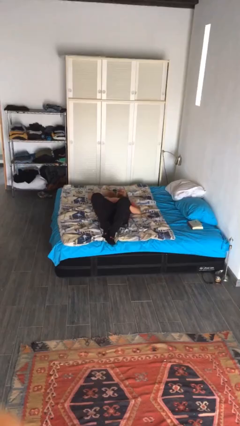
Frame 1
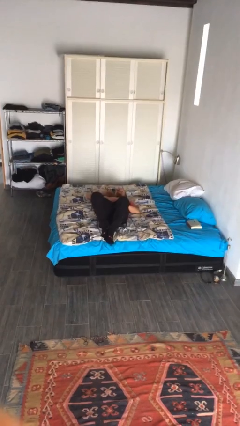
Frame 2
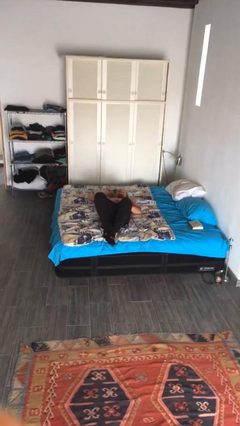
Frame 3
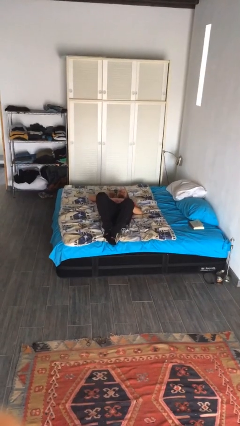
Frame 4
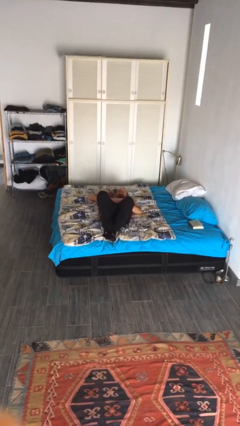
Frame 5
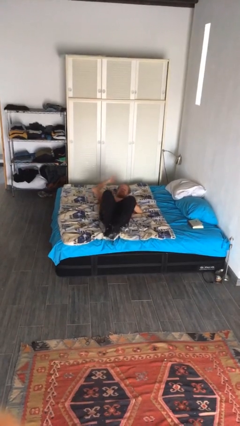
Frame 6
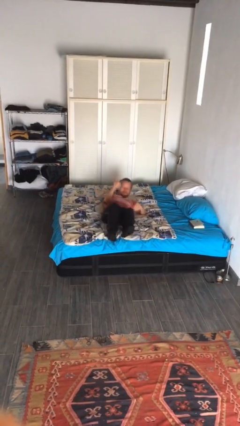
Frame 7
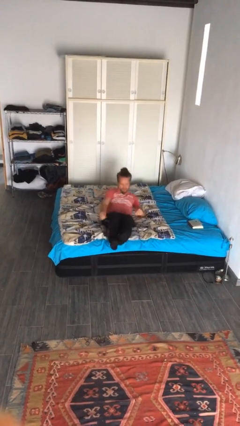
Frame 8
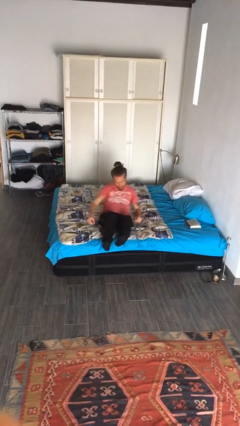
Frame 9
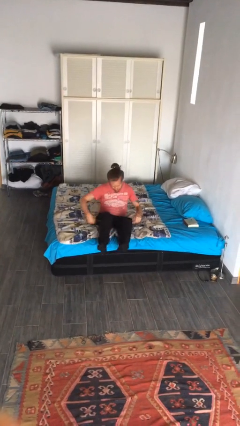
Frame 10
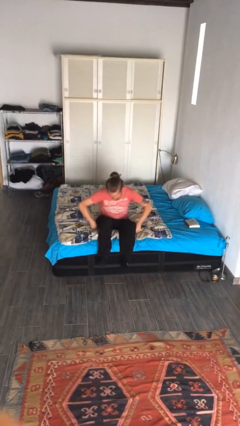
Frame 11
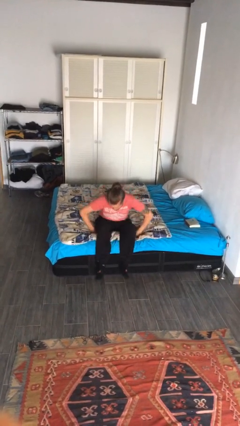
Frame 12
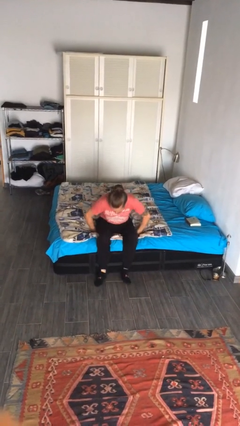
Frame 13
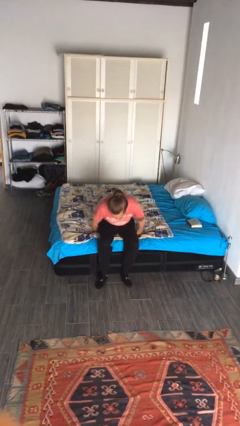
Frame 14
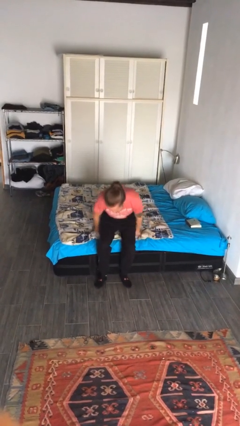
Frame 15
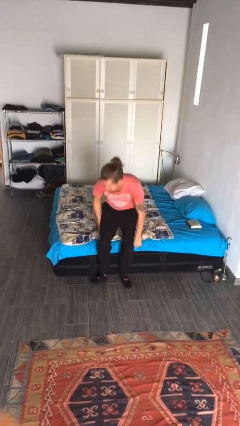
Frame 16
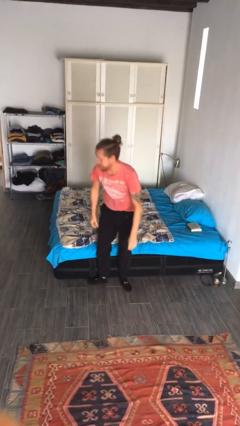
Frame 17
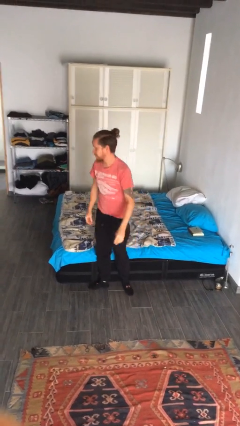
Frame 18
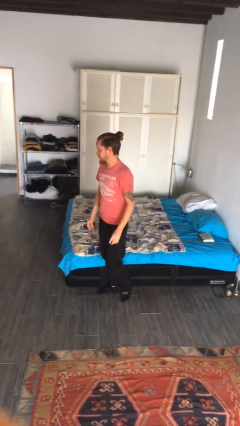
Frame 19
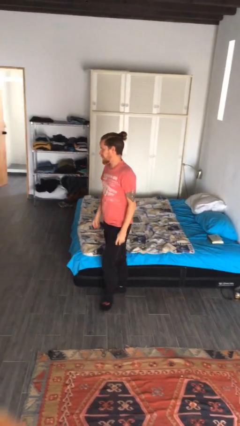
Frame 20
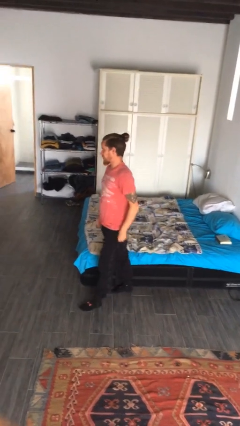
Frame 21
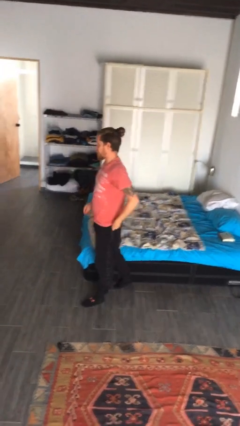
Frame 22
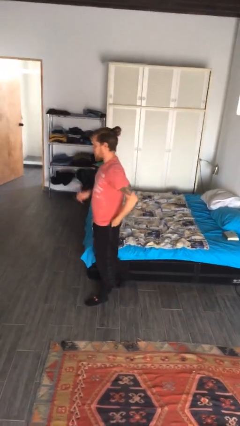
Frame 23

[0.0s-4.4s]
person stands up

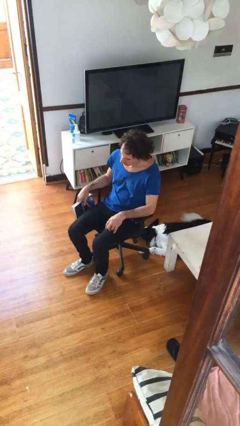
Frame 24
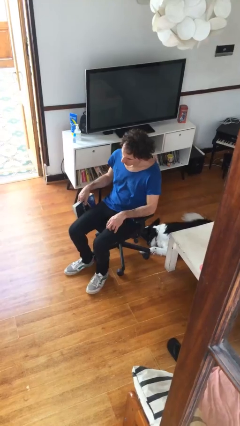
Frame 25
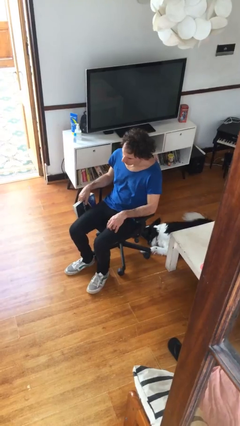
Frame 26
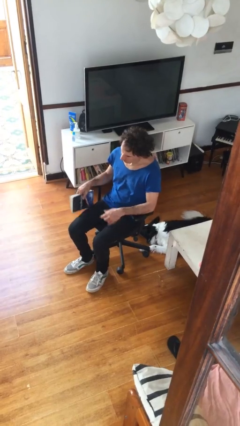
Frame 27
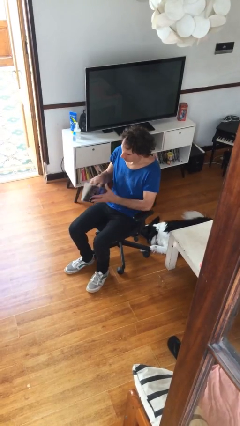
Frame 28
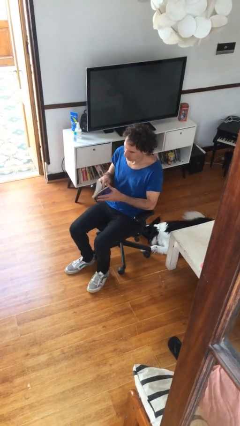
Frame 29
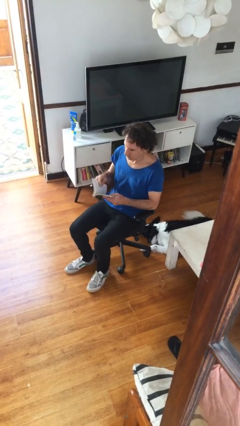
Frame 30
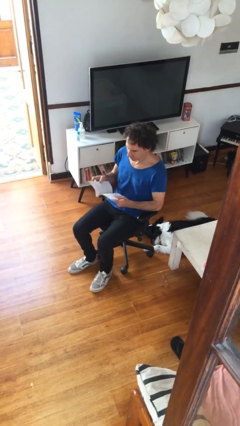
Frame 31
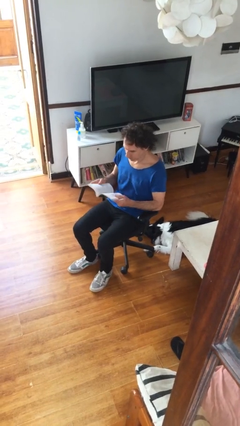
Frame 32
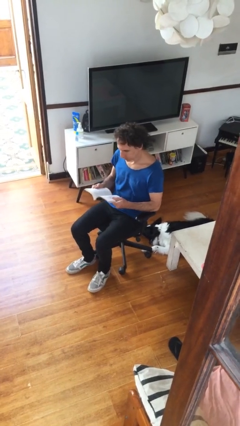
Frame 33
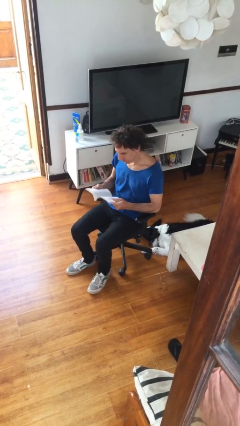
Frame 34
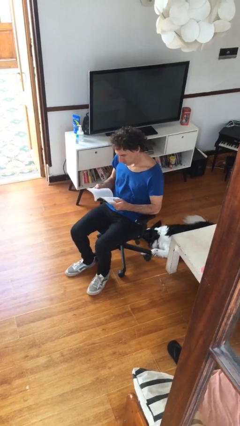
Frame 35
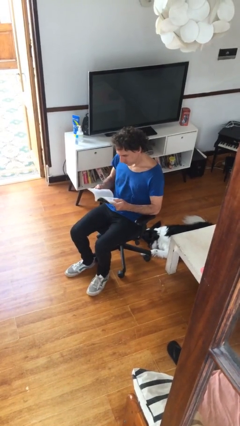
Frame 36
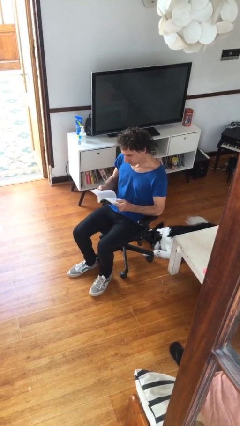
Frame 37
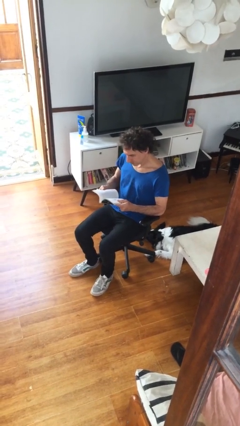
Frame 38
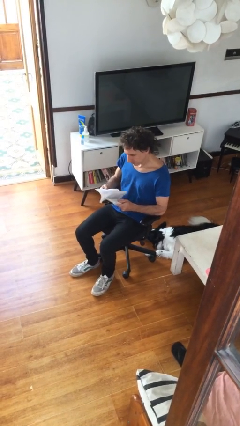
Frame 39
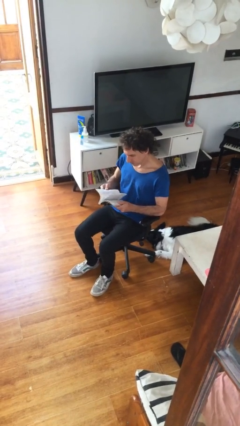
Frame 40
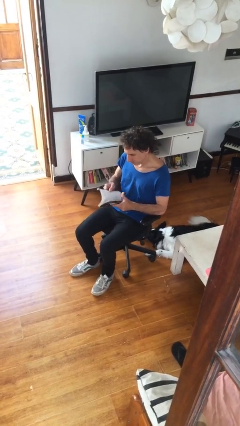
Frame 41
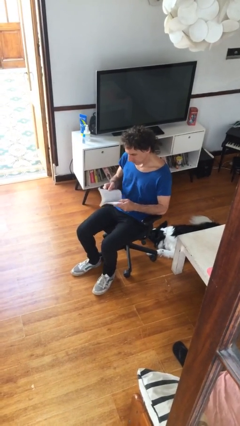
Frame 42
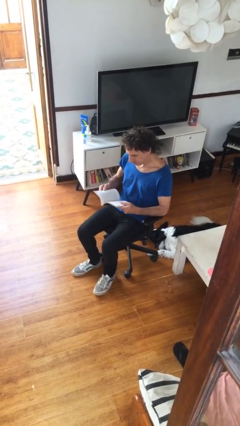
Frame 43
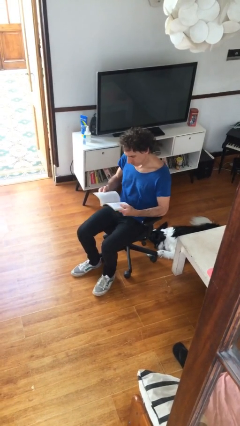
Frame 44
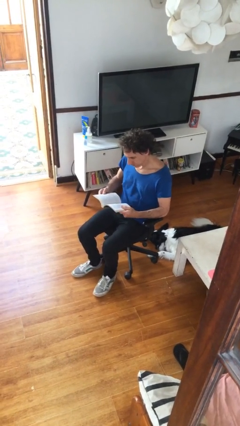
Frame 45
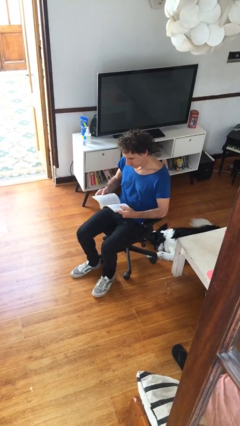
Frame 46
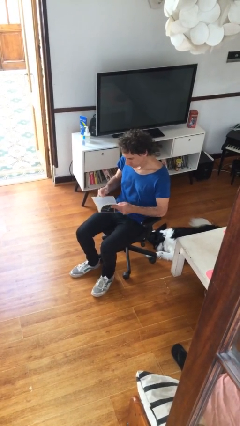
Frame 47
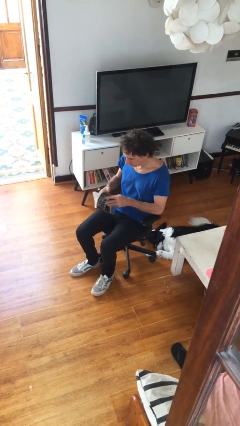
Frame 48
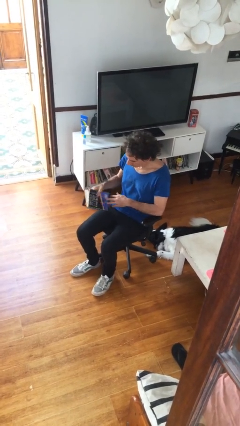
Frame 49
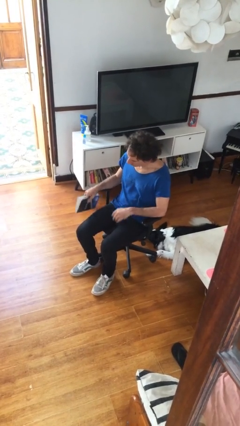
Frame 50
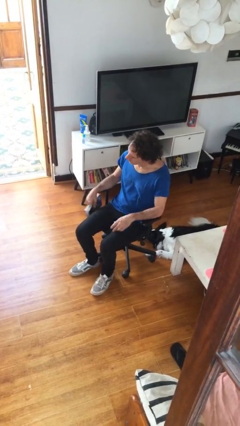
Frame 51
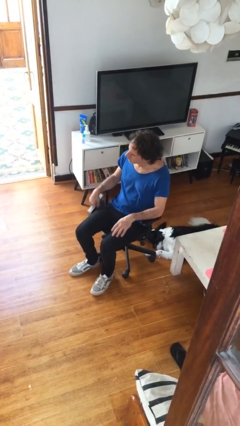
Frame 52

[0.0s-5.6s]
person reads document

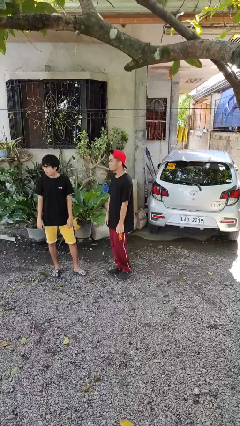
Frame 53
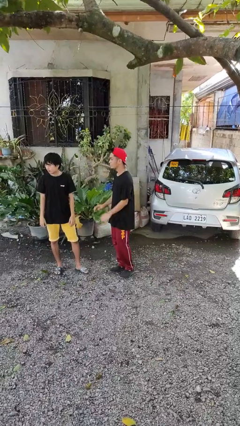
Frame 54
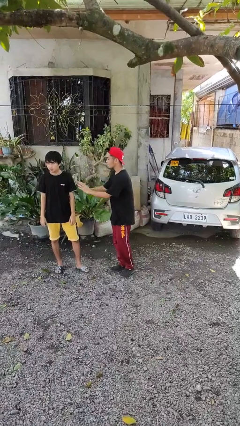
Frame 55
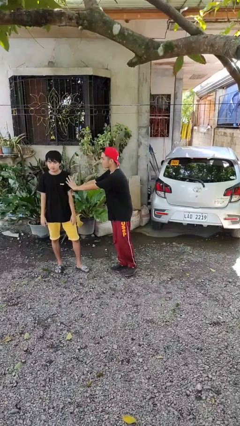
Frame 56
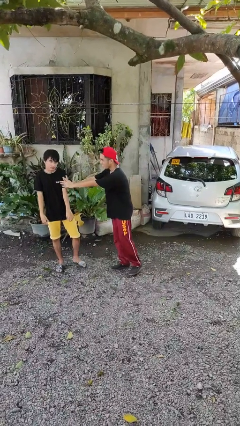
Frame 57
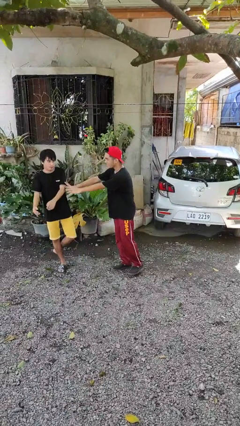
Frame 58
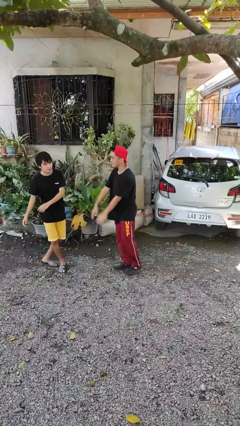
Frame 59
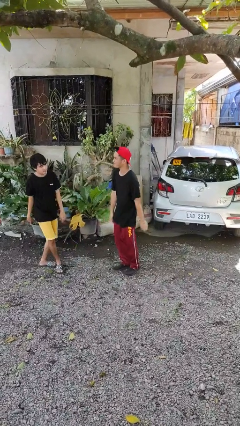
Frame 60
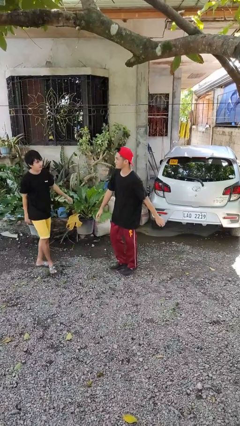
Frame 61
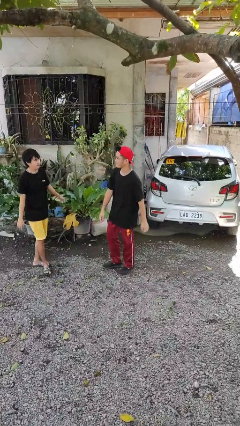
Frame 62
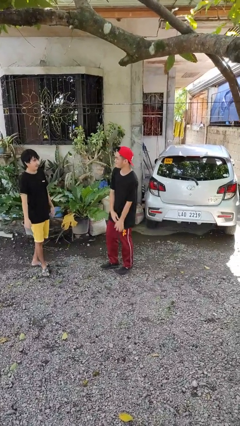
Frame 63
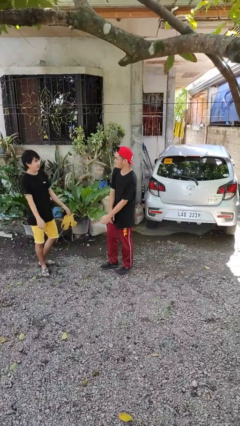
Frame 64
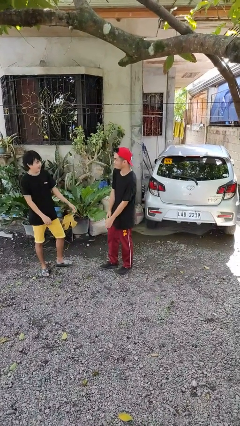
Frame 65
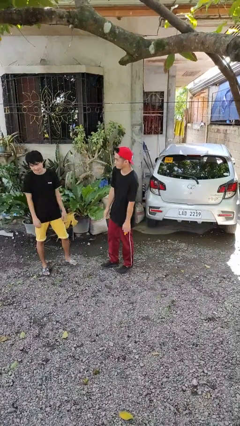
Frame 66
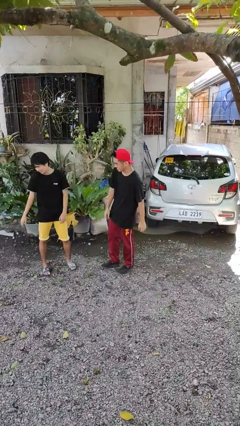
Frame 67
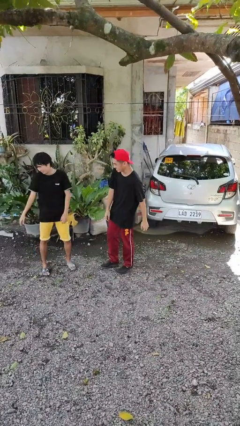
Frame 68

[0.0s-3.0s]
person shoves person

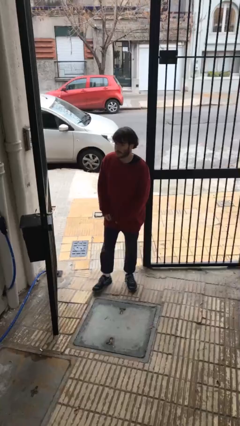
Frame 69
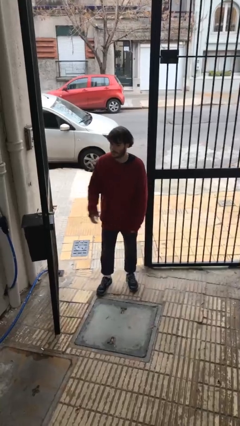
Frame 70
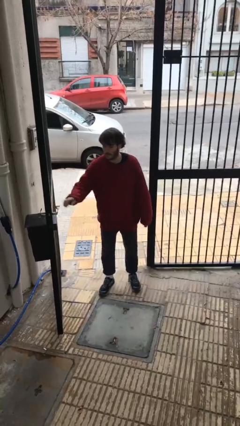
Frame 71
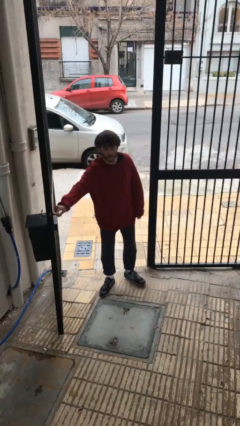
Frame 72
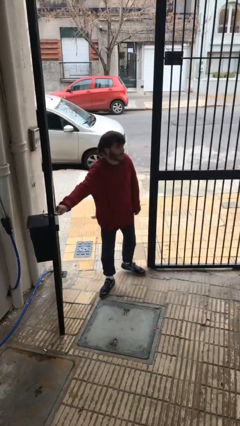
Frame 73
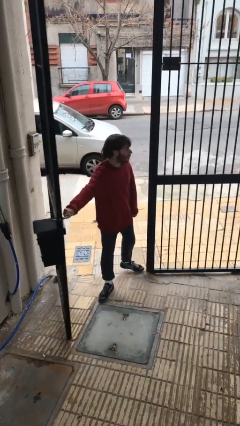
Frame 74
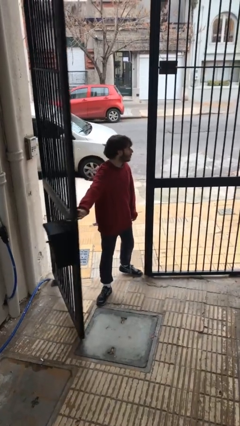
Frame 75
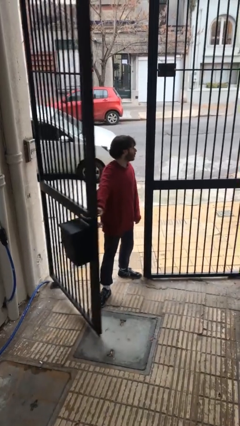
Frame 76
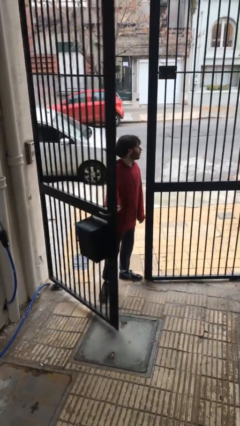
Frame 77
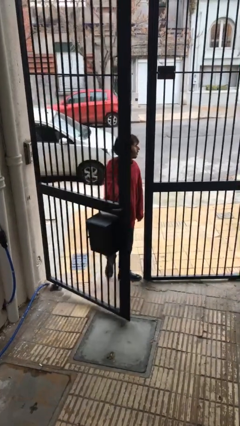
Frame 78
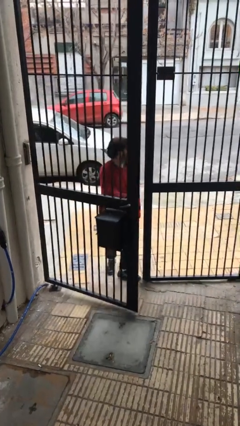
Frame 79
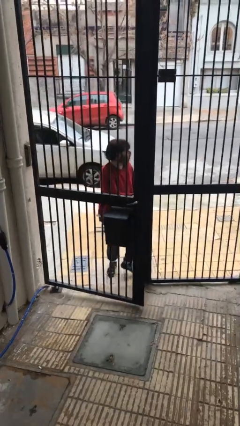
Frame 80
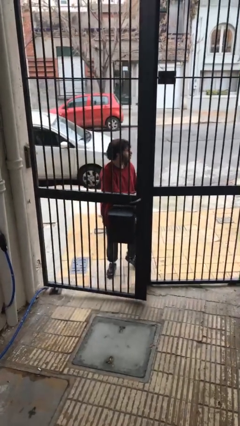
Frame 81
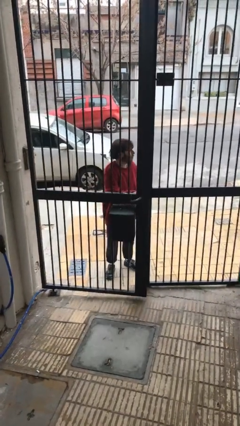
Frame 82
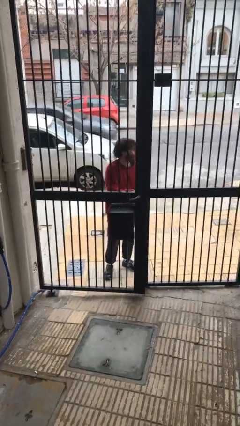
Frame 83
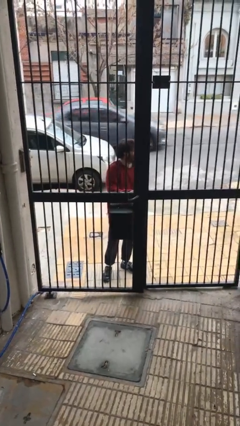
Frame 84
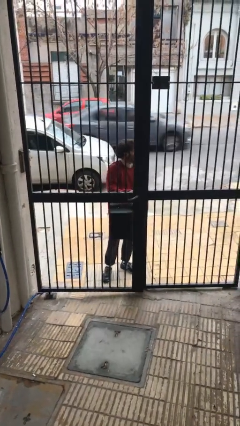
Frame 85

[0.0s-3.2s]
person closes gate

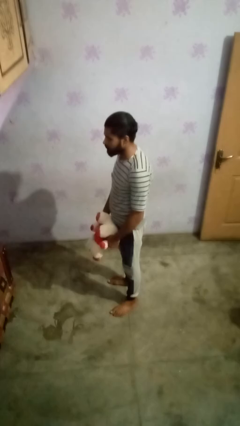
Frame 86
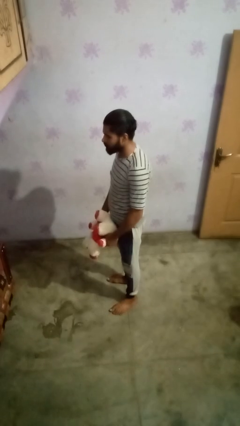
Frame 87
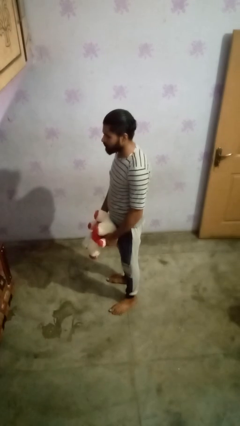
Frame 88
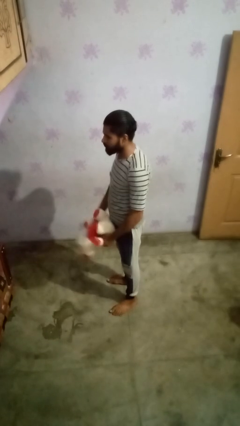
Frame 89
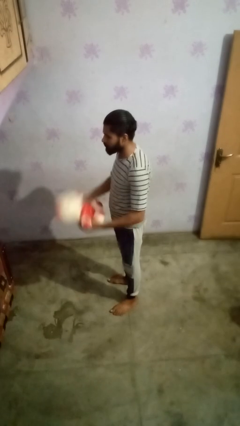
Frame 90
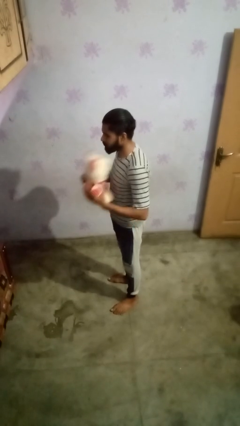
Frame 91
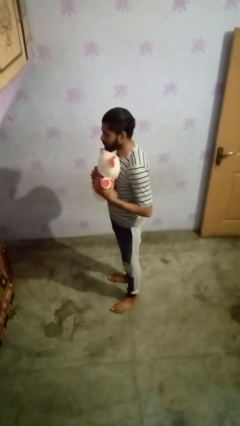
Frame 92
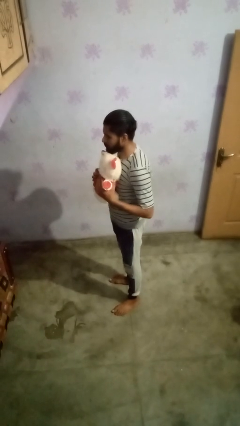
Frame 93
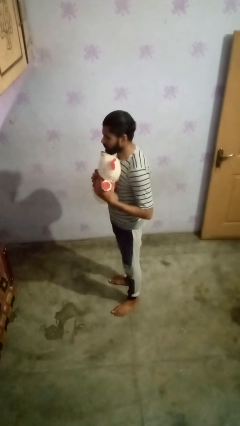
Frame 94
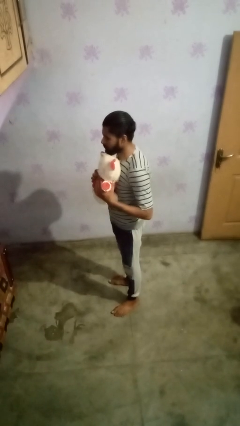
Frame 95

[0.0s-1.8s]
person hugs stuffed animal
